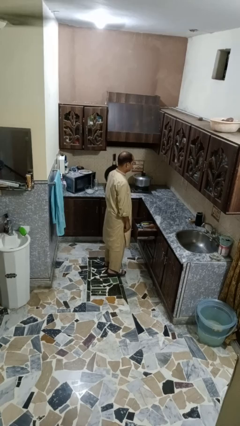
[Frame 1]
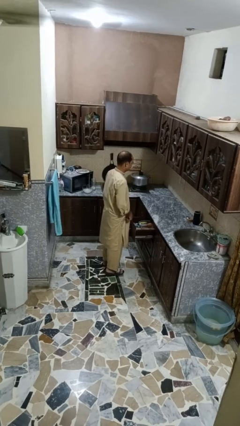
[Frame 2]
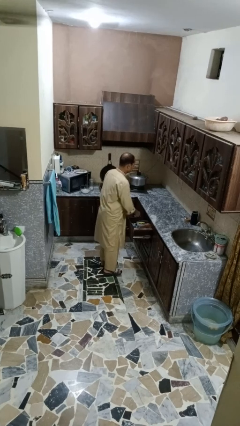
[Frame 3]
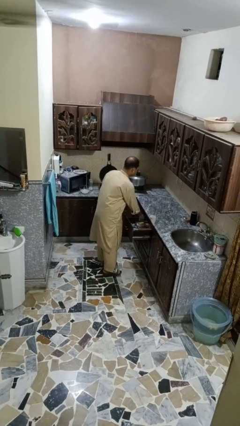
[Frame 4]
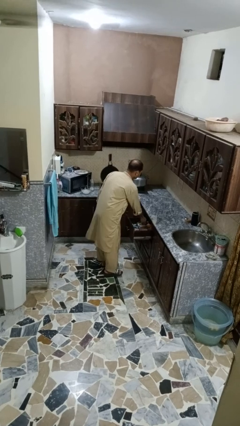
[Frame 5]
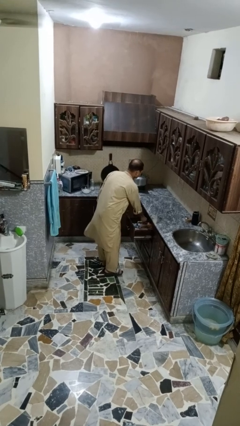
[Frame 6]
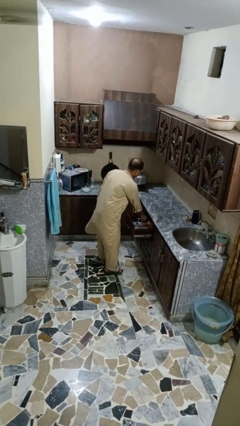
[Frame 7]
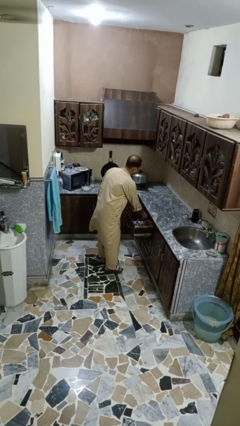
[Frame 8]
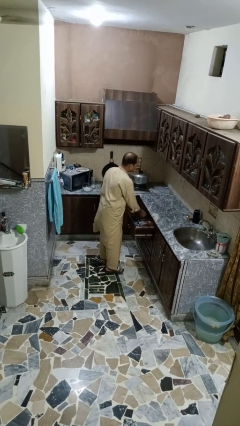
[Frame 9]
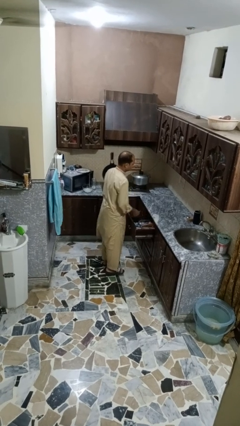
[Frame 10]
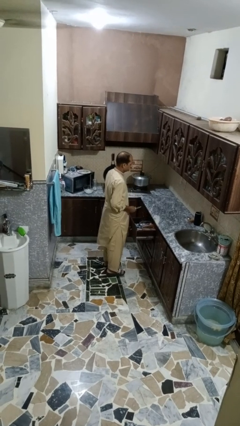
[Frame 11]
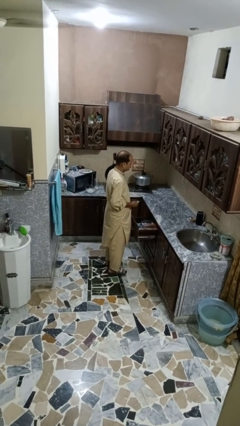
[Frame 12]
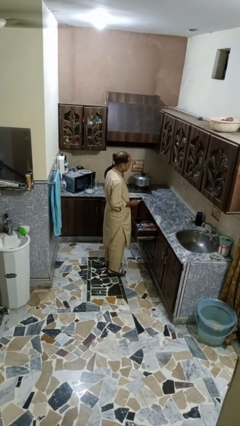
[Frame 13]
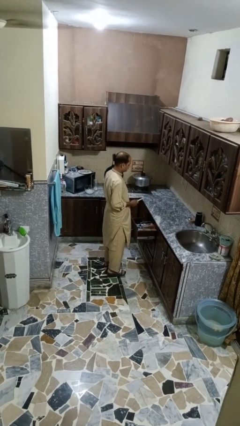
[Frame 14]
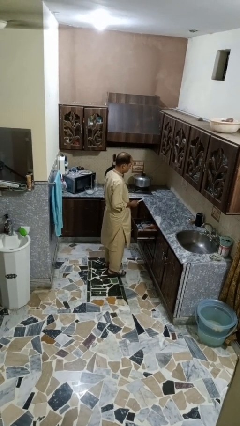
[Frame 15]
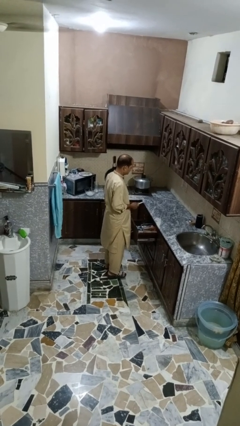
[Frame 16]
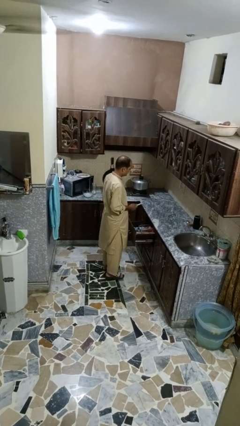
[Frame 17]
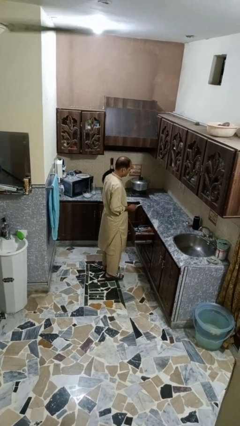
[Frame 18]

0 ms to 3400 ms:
person takes object from kitchen drawer

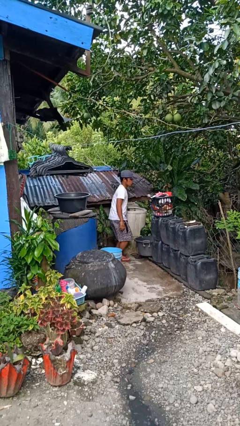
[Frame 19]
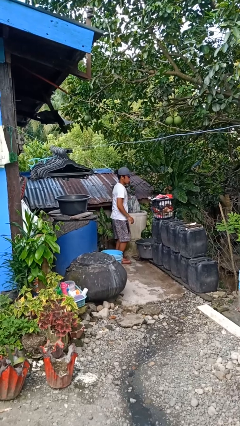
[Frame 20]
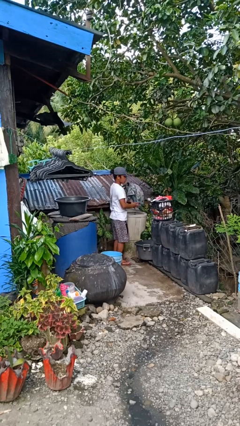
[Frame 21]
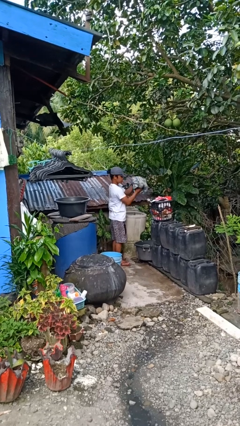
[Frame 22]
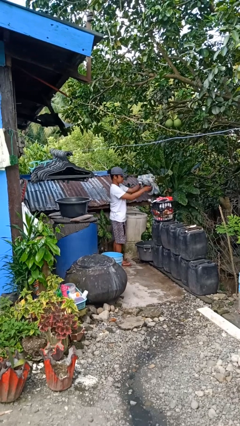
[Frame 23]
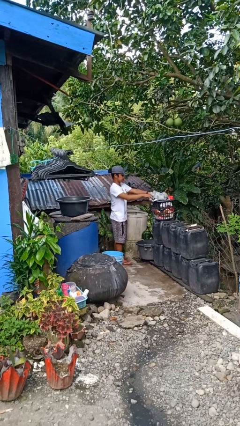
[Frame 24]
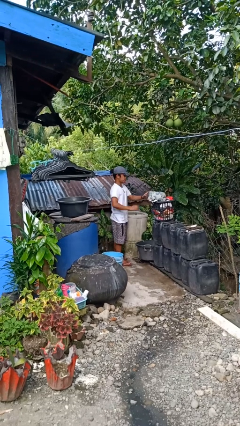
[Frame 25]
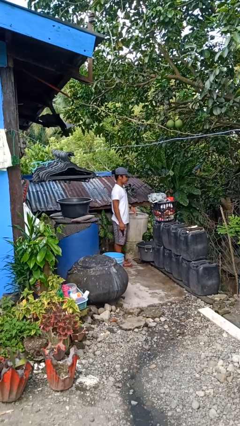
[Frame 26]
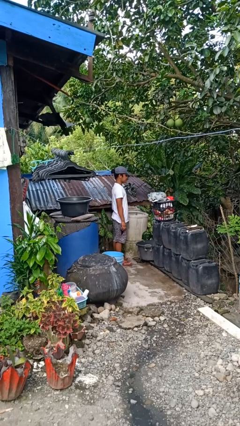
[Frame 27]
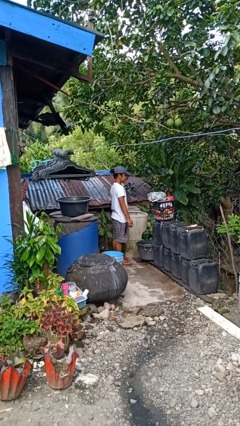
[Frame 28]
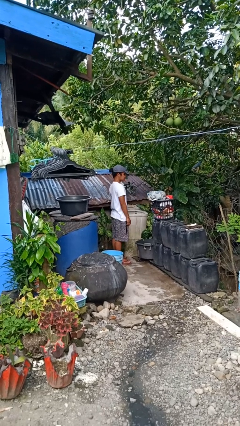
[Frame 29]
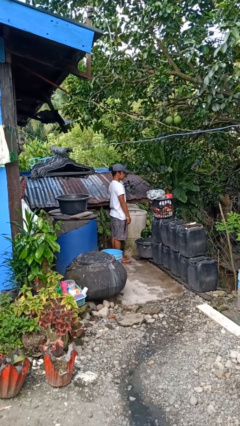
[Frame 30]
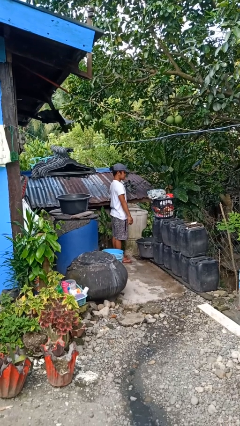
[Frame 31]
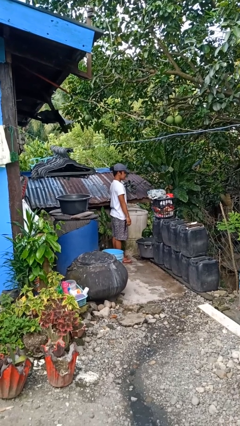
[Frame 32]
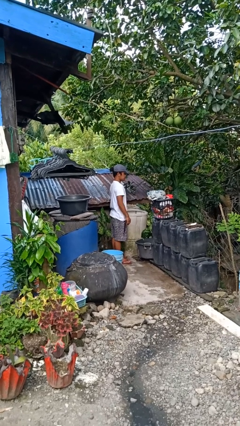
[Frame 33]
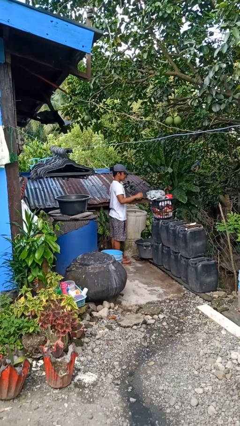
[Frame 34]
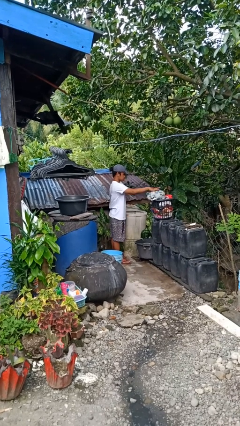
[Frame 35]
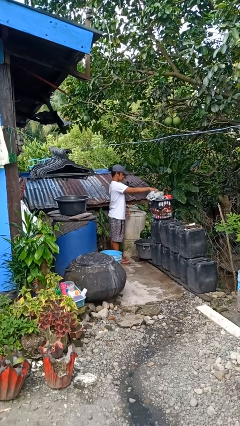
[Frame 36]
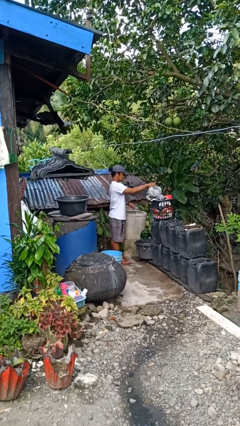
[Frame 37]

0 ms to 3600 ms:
person unloads clotheswasher

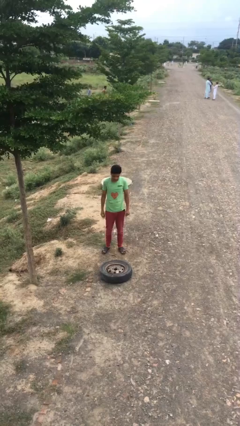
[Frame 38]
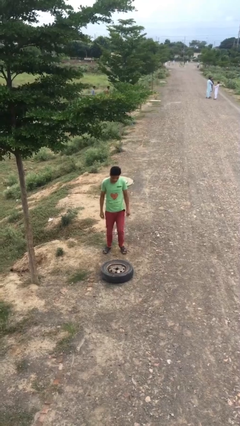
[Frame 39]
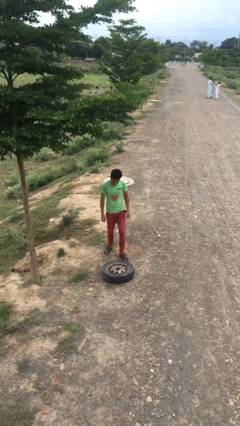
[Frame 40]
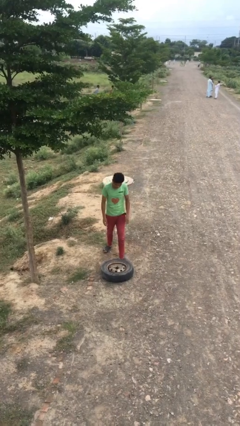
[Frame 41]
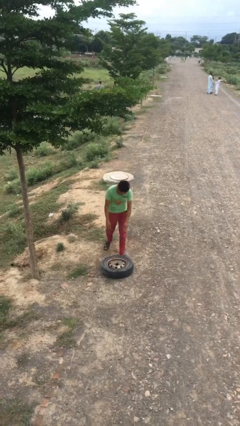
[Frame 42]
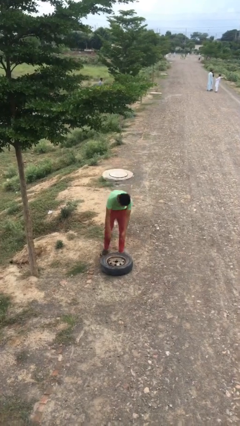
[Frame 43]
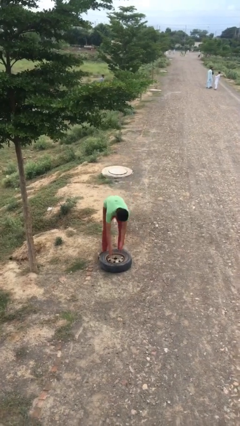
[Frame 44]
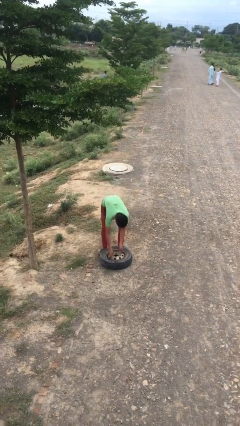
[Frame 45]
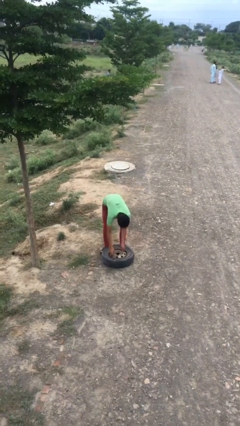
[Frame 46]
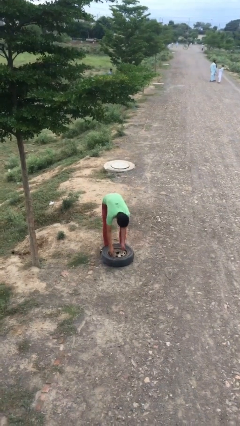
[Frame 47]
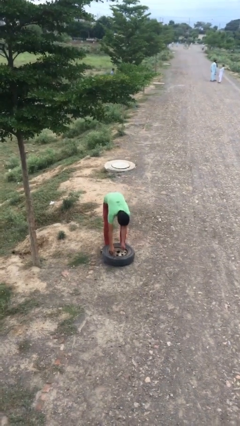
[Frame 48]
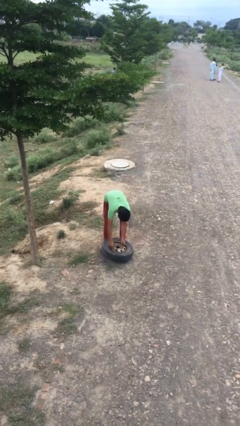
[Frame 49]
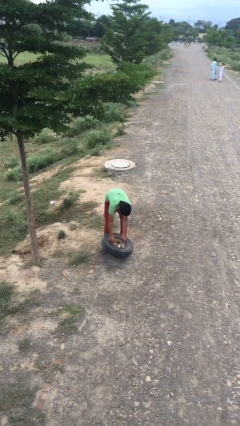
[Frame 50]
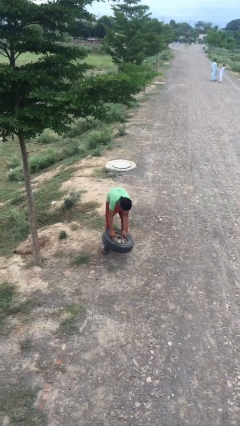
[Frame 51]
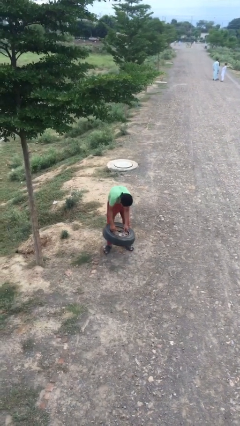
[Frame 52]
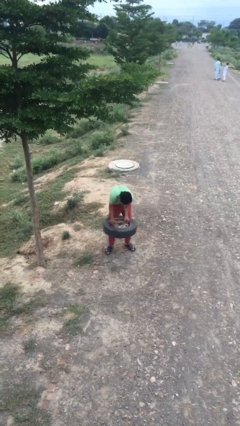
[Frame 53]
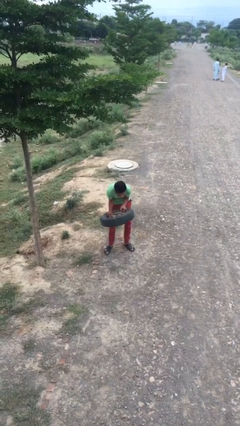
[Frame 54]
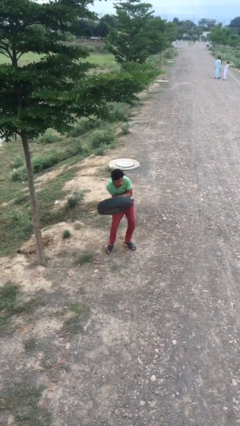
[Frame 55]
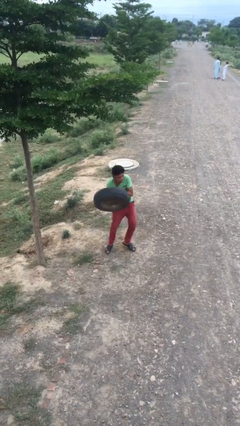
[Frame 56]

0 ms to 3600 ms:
person picks up object from floor

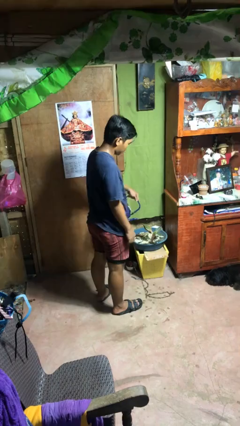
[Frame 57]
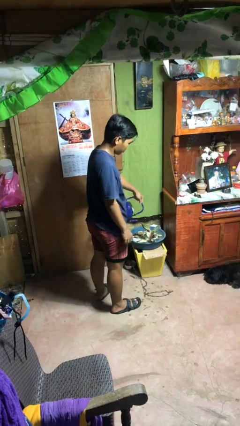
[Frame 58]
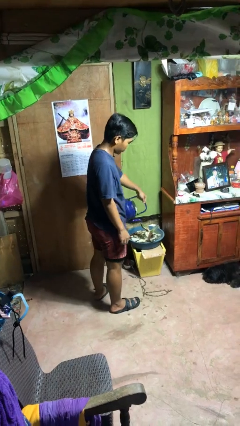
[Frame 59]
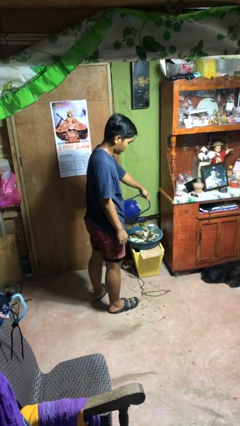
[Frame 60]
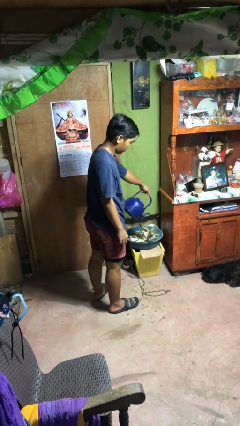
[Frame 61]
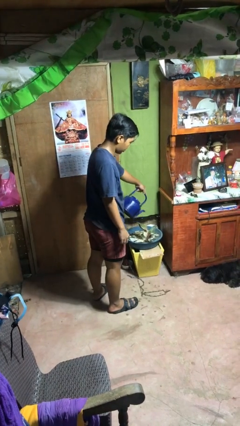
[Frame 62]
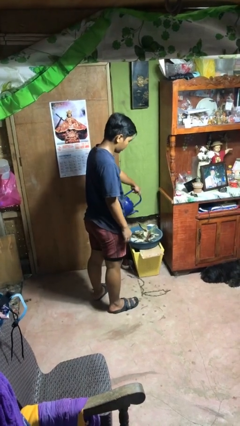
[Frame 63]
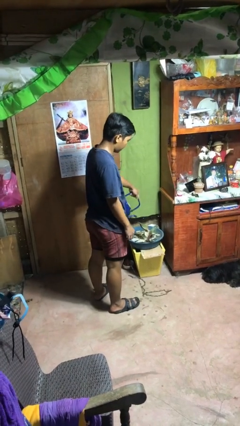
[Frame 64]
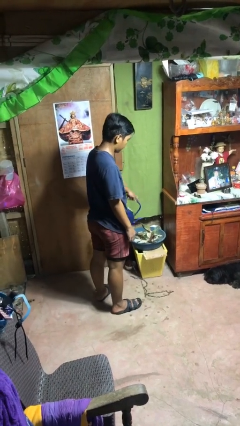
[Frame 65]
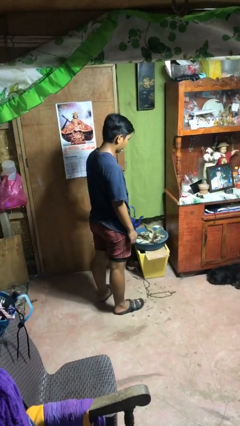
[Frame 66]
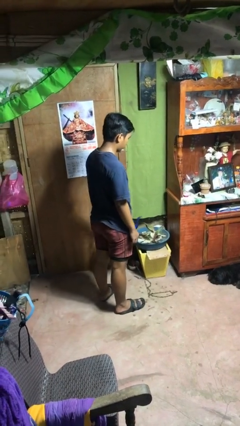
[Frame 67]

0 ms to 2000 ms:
person waters houseplant

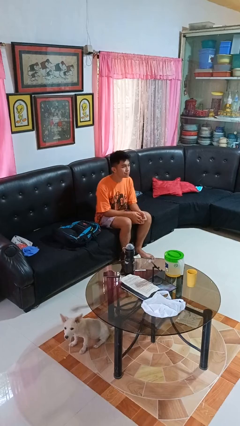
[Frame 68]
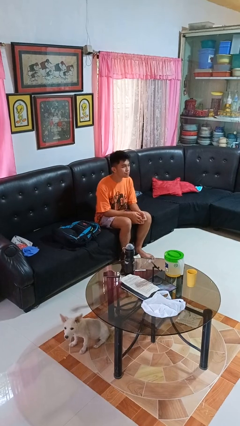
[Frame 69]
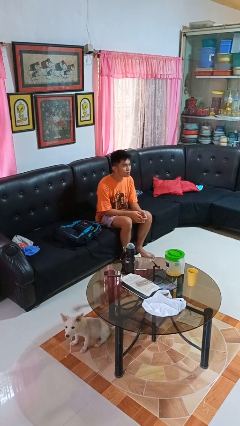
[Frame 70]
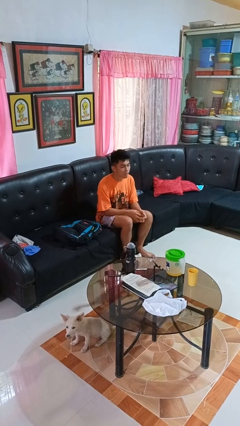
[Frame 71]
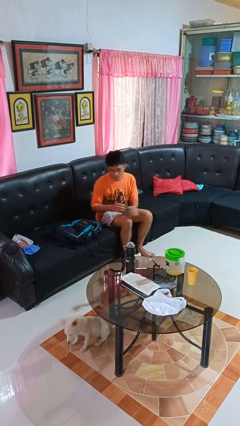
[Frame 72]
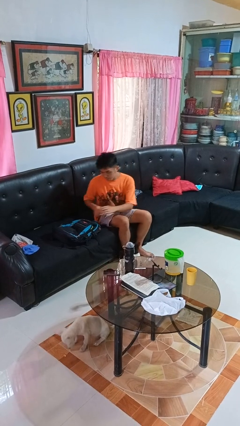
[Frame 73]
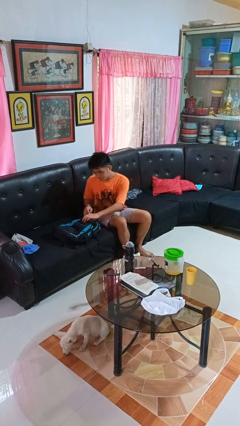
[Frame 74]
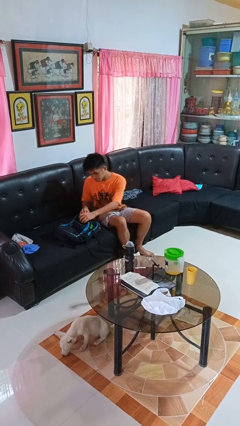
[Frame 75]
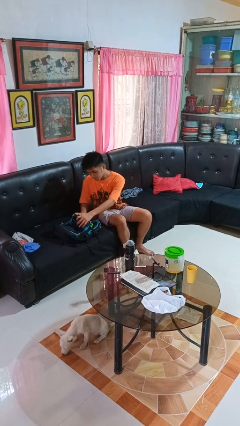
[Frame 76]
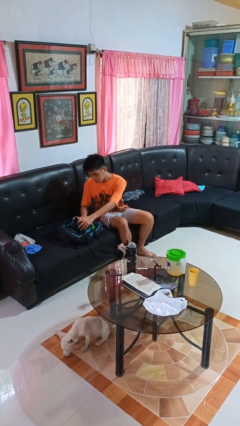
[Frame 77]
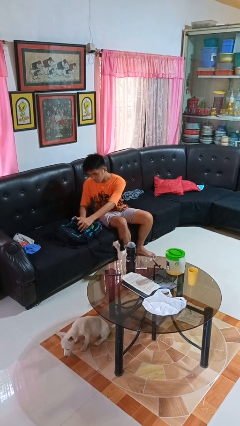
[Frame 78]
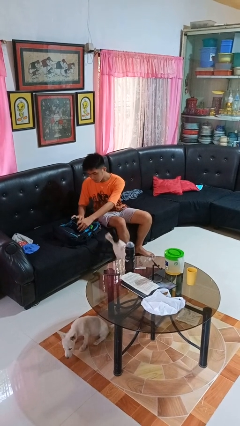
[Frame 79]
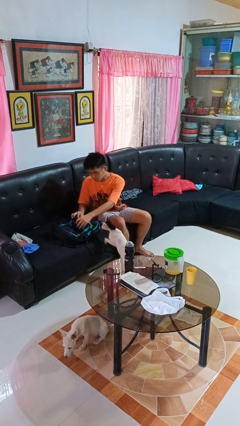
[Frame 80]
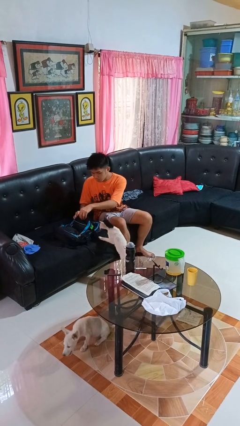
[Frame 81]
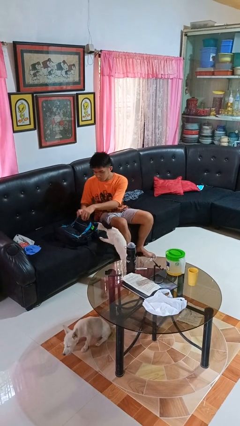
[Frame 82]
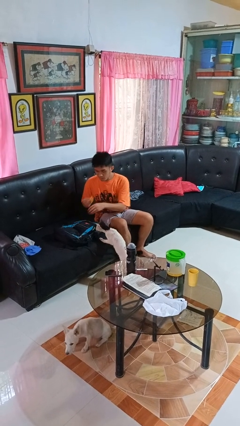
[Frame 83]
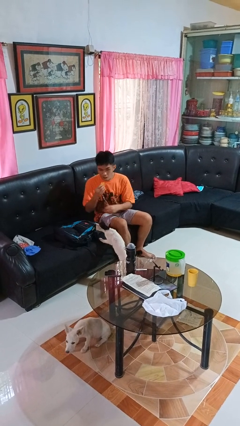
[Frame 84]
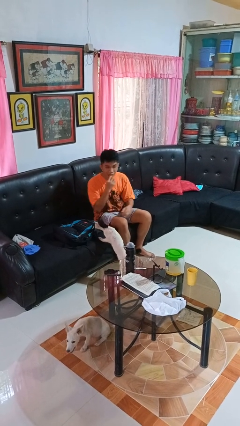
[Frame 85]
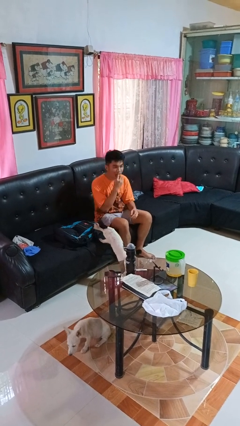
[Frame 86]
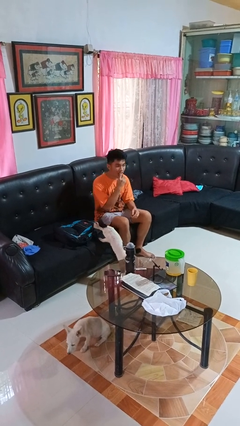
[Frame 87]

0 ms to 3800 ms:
person eats snack from bag

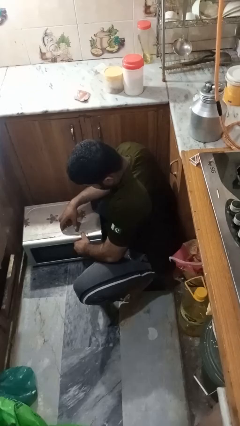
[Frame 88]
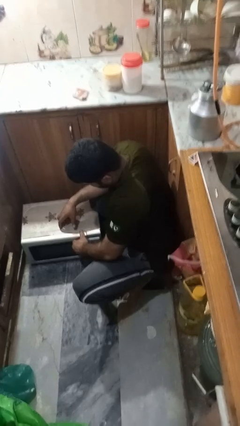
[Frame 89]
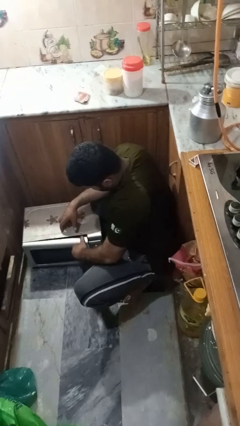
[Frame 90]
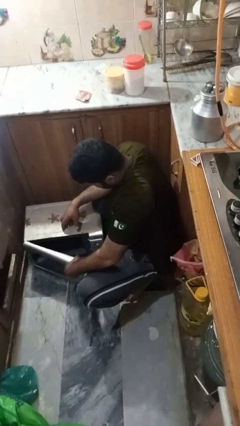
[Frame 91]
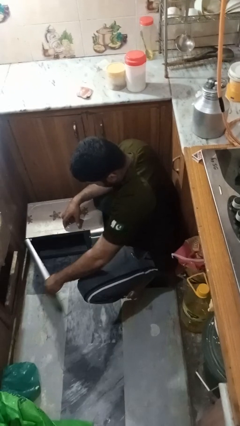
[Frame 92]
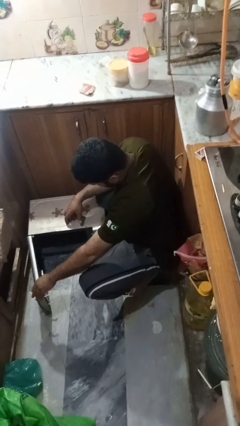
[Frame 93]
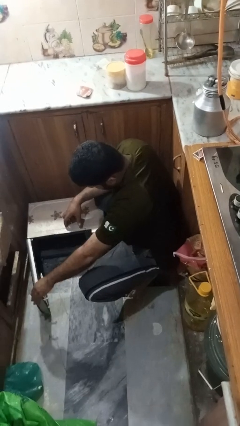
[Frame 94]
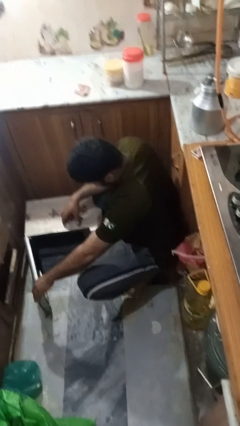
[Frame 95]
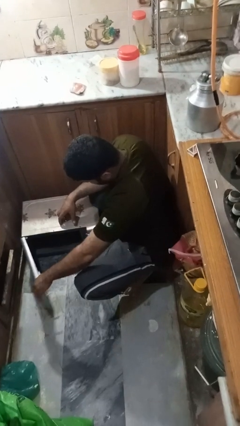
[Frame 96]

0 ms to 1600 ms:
person opens oven door
